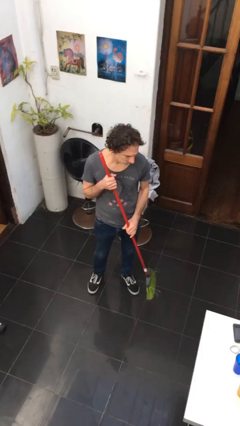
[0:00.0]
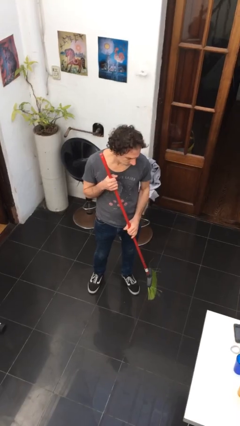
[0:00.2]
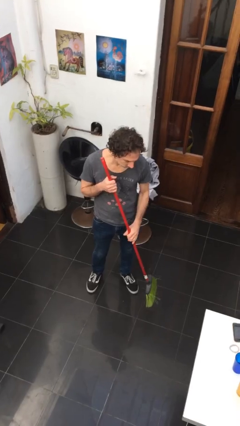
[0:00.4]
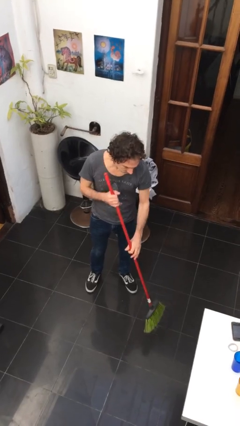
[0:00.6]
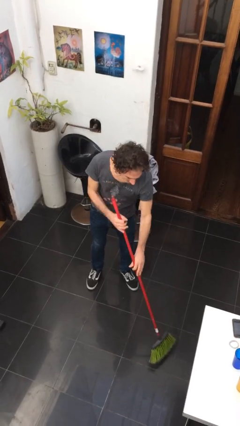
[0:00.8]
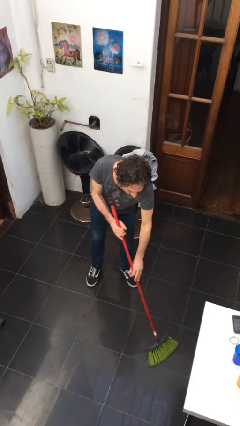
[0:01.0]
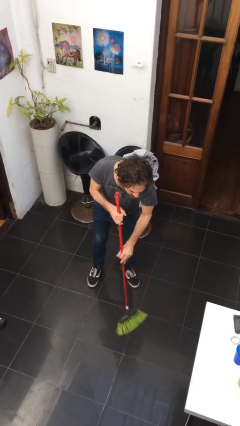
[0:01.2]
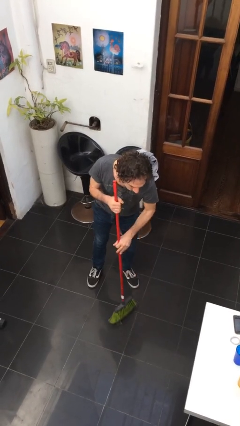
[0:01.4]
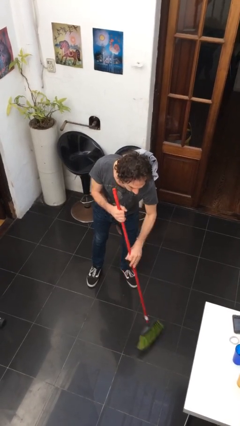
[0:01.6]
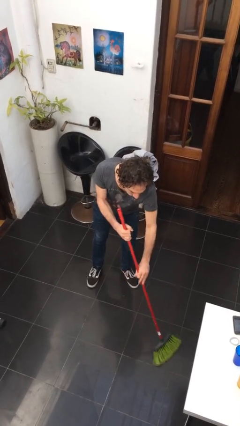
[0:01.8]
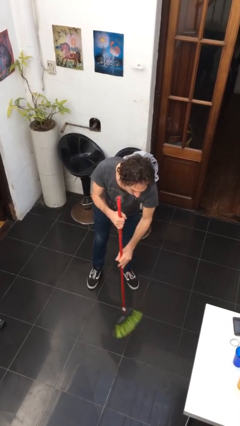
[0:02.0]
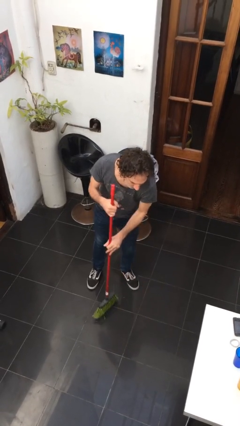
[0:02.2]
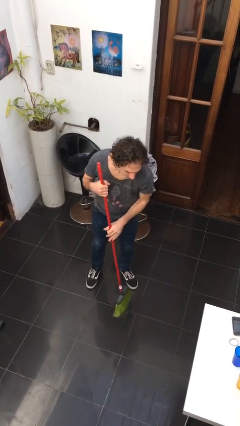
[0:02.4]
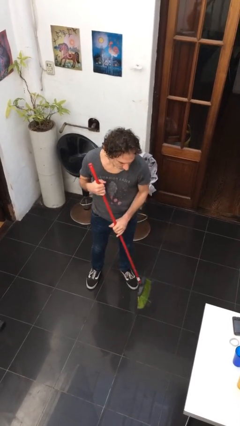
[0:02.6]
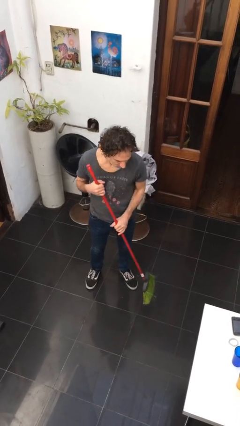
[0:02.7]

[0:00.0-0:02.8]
person sweeps floor

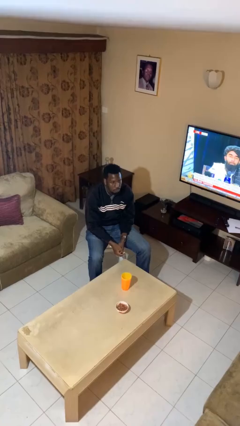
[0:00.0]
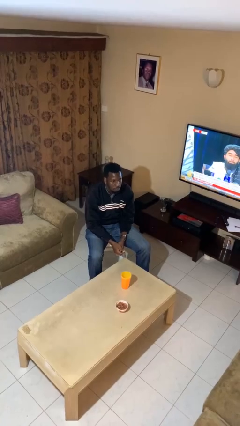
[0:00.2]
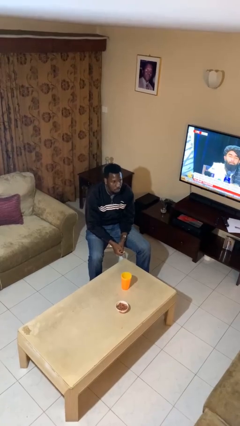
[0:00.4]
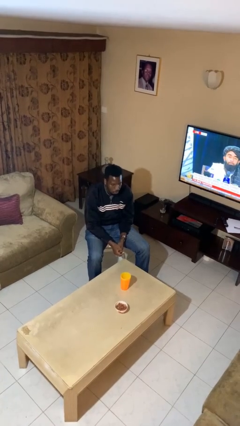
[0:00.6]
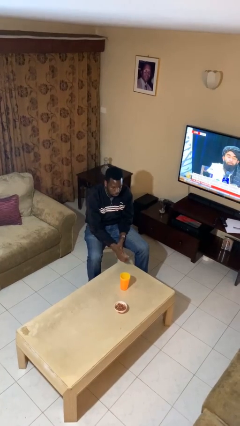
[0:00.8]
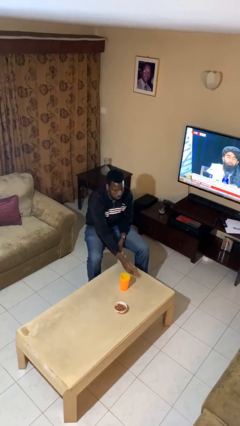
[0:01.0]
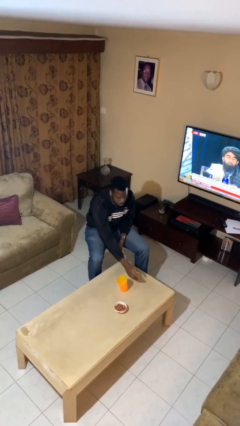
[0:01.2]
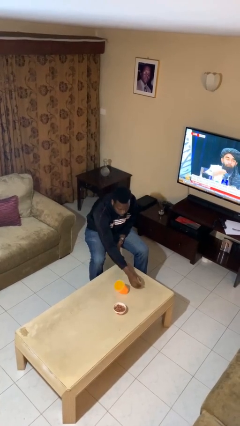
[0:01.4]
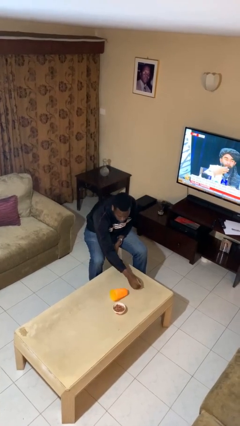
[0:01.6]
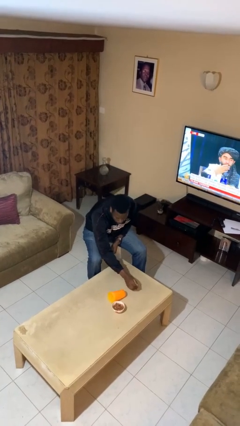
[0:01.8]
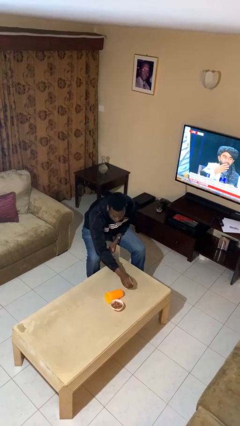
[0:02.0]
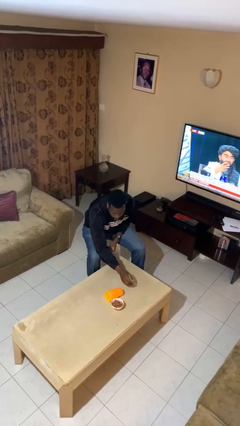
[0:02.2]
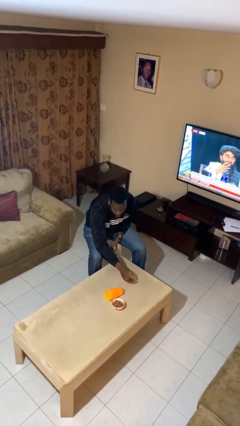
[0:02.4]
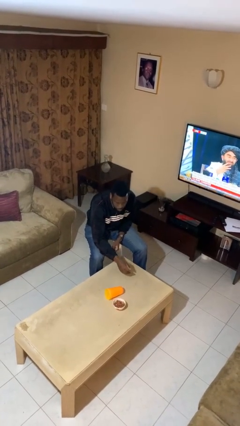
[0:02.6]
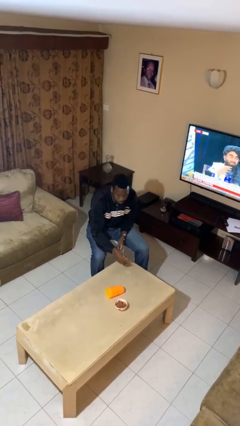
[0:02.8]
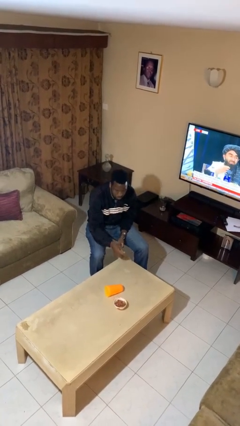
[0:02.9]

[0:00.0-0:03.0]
person knocks over glass

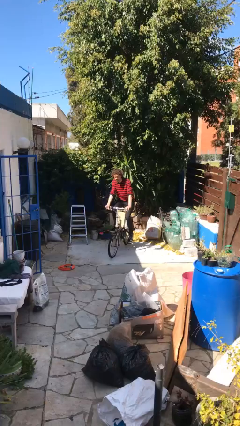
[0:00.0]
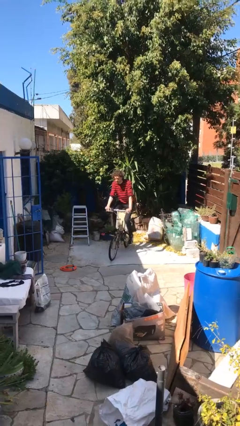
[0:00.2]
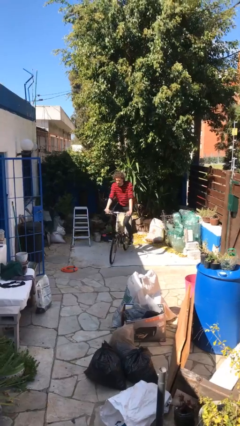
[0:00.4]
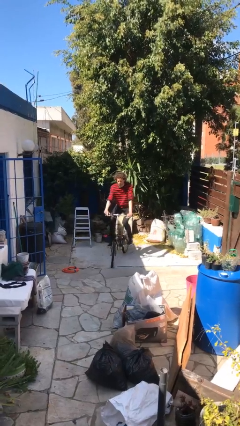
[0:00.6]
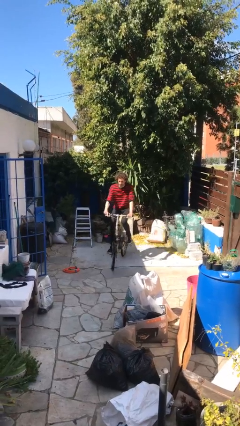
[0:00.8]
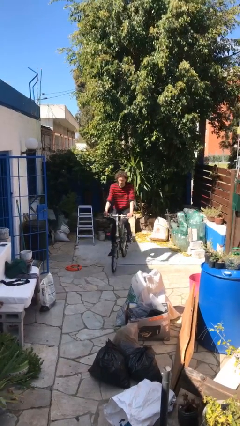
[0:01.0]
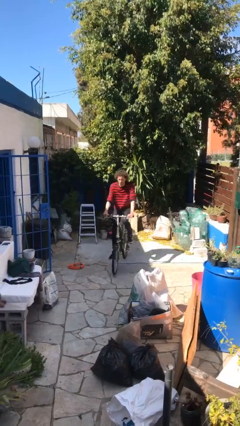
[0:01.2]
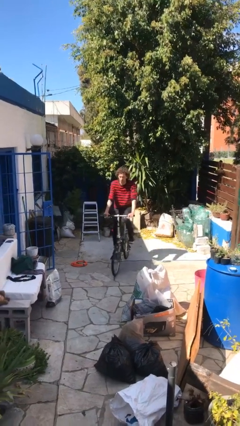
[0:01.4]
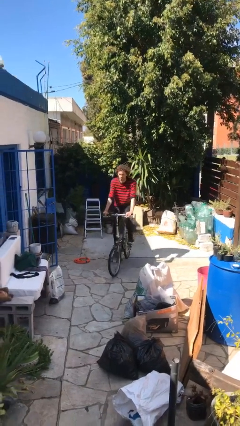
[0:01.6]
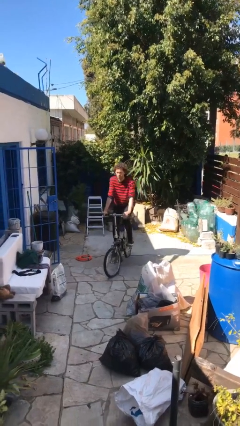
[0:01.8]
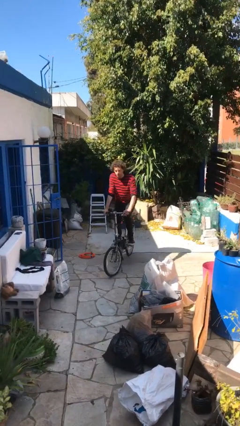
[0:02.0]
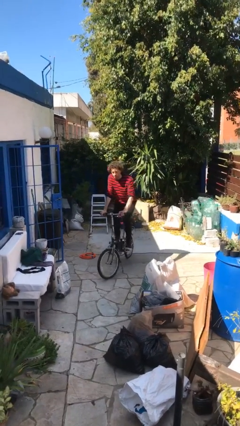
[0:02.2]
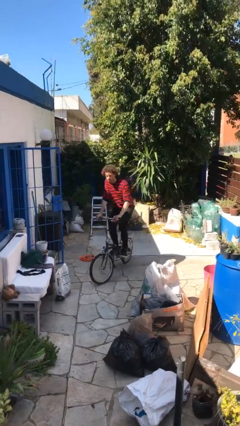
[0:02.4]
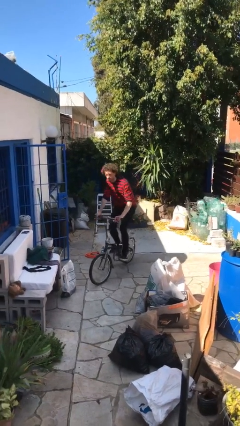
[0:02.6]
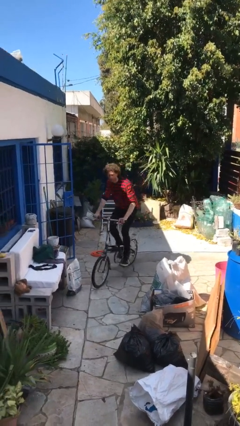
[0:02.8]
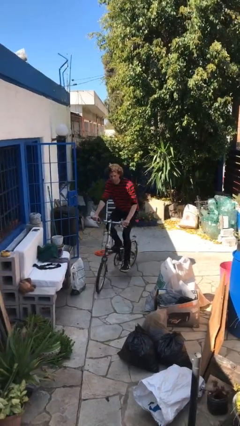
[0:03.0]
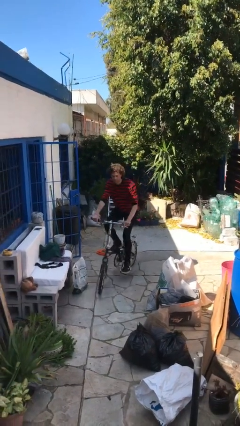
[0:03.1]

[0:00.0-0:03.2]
person rides bicycle

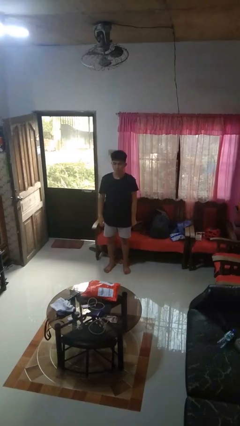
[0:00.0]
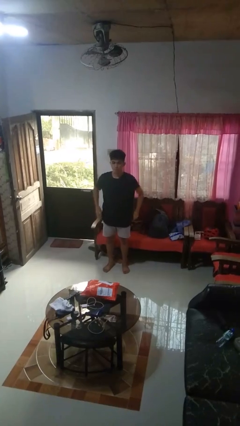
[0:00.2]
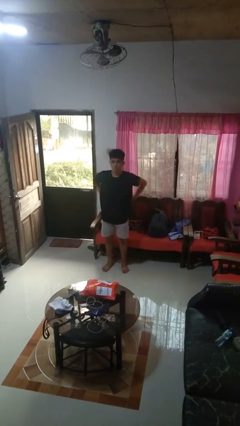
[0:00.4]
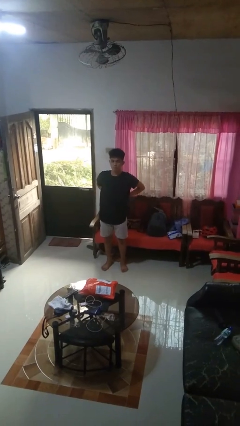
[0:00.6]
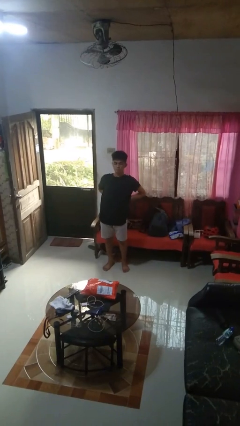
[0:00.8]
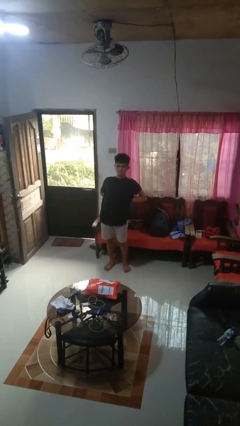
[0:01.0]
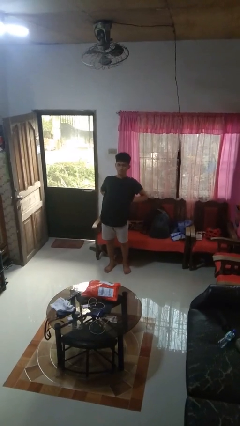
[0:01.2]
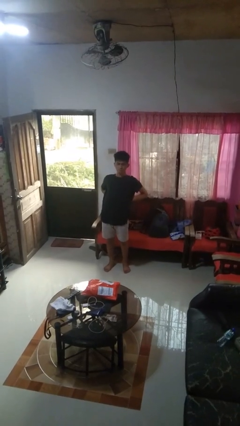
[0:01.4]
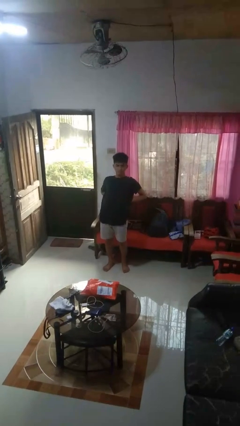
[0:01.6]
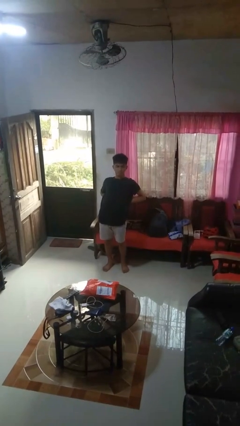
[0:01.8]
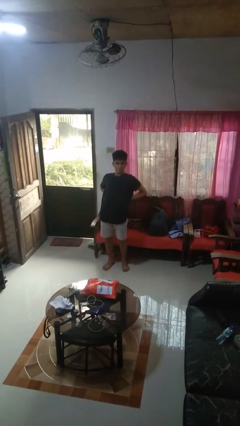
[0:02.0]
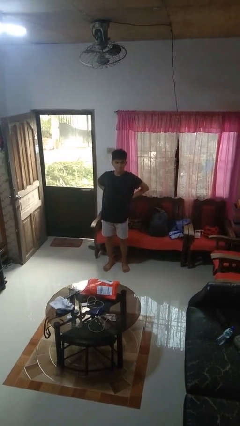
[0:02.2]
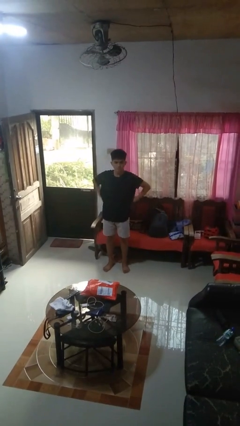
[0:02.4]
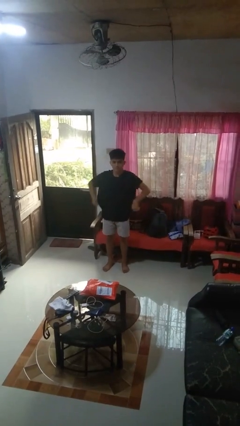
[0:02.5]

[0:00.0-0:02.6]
person stretches back

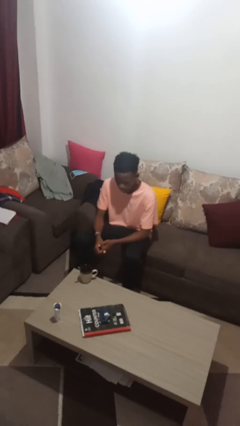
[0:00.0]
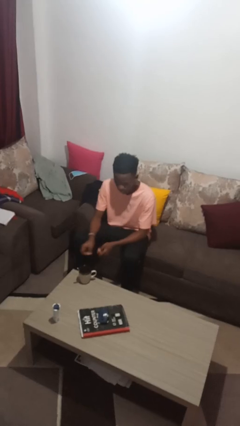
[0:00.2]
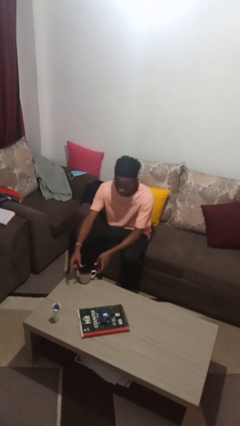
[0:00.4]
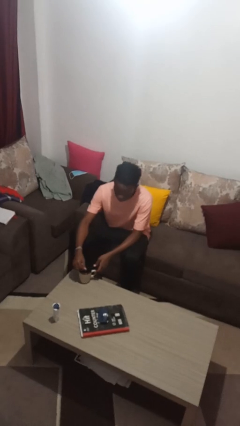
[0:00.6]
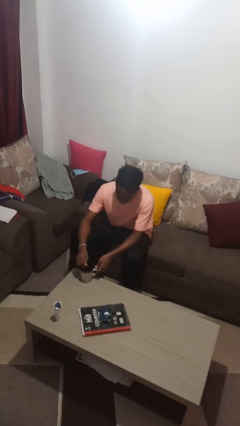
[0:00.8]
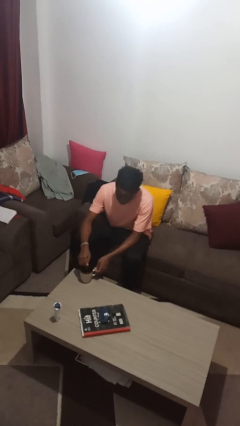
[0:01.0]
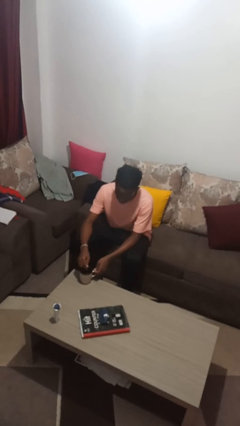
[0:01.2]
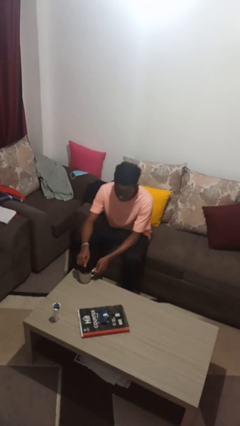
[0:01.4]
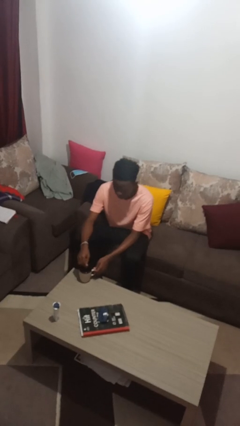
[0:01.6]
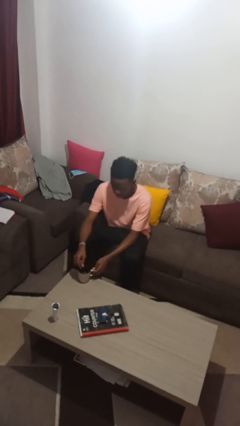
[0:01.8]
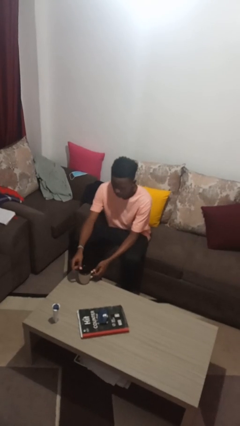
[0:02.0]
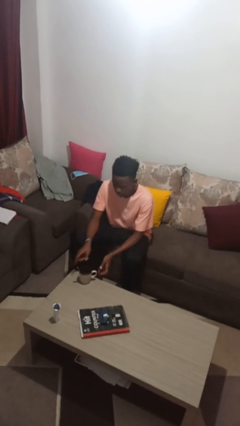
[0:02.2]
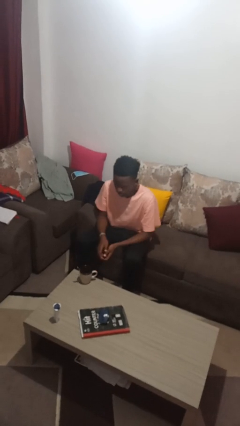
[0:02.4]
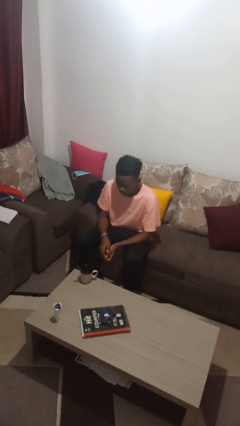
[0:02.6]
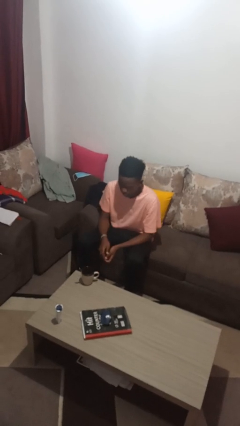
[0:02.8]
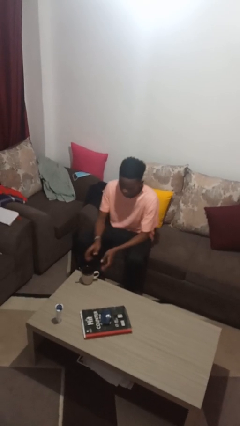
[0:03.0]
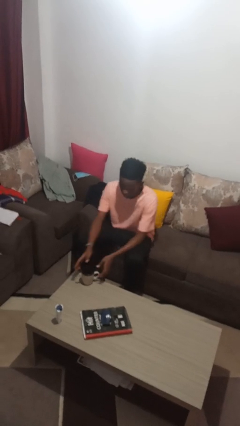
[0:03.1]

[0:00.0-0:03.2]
person stirs mug

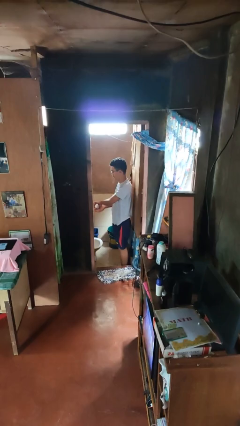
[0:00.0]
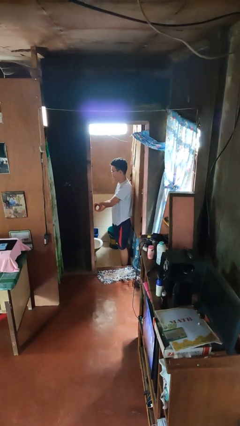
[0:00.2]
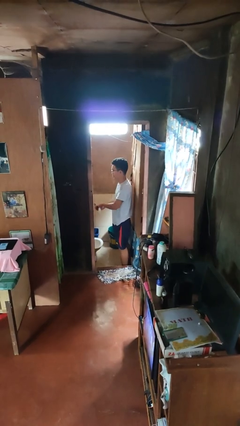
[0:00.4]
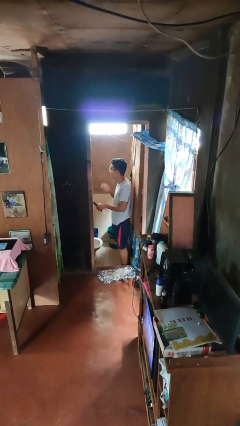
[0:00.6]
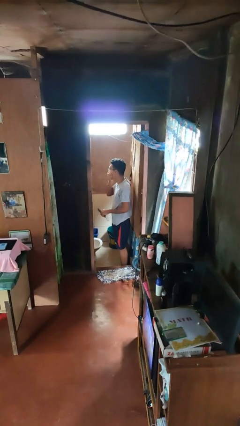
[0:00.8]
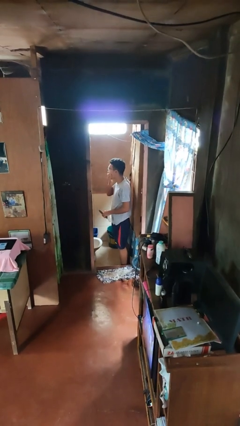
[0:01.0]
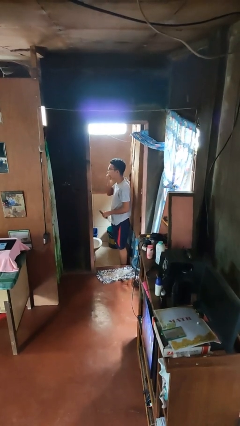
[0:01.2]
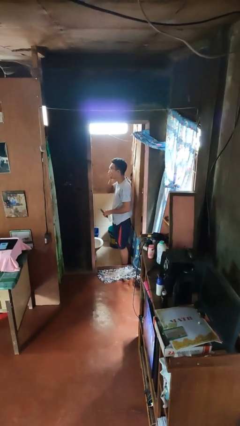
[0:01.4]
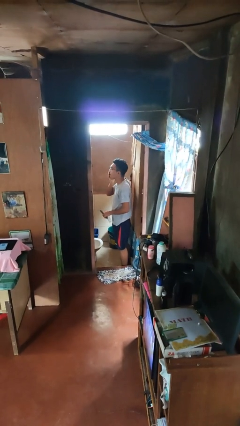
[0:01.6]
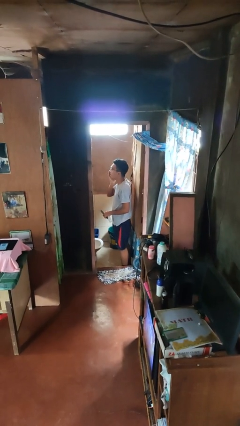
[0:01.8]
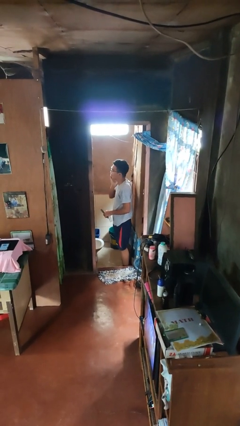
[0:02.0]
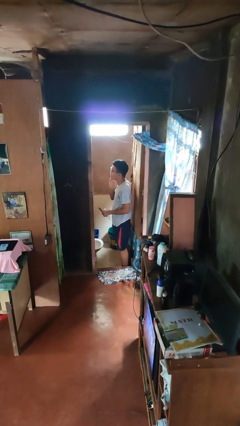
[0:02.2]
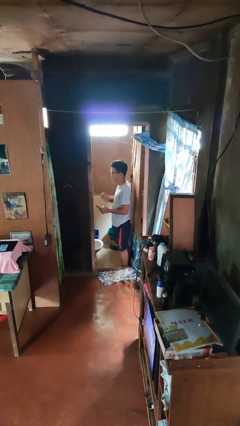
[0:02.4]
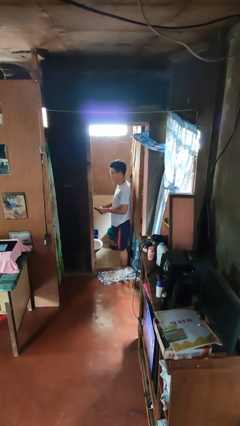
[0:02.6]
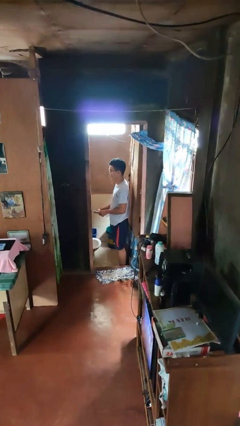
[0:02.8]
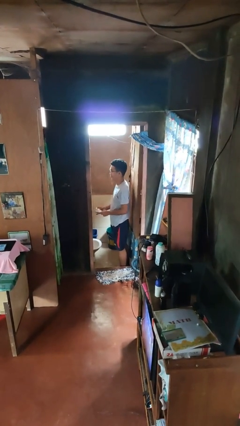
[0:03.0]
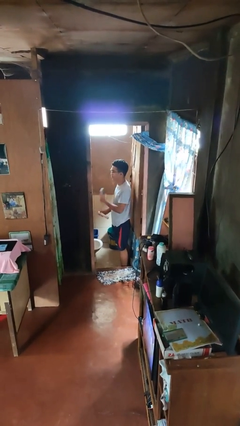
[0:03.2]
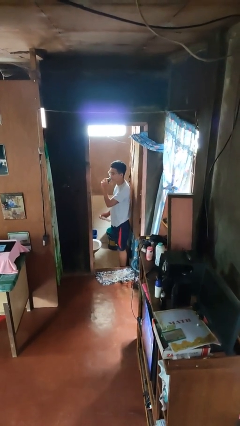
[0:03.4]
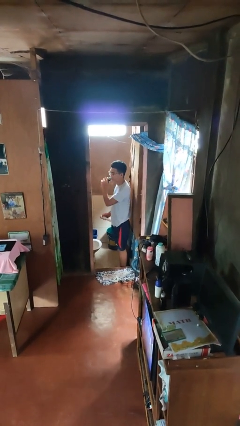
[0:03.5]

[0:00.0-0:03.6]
person applies shaving cream
